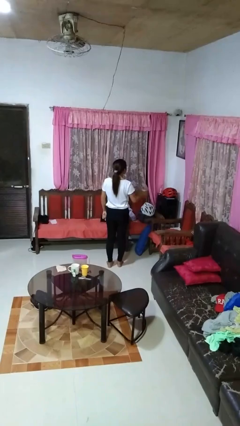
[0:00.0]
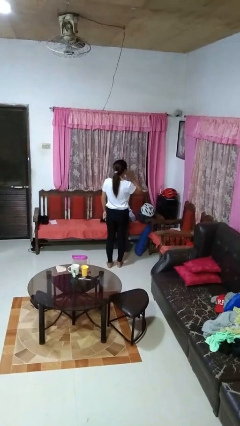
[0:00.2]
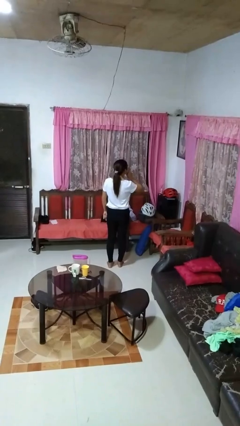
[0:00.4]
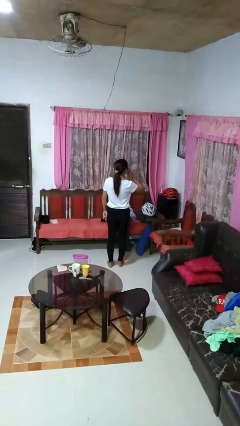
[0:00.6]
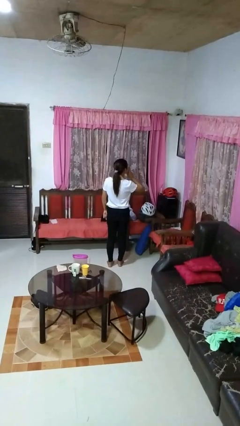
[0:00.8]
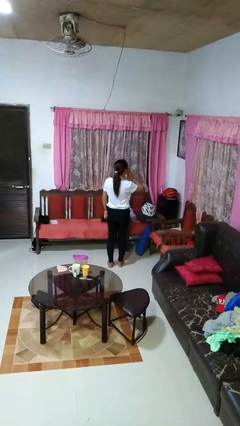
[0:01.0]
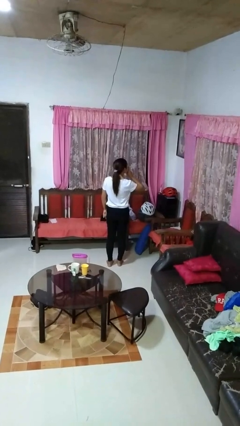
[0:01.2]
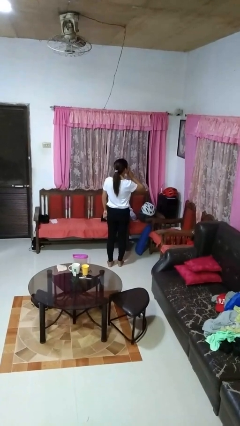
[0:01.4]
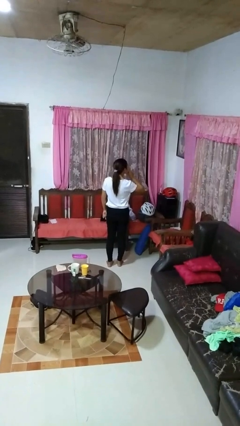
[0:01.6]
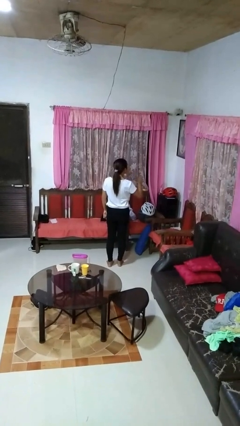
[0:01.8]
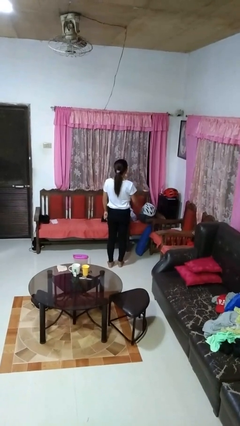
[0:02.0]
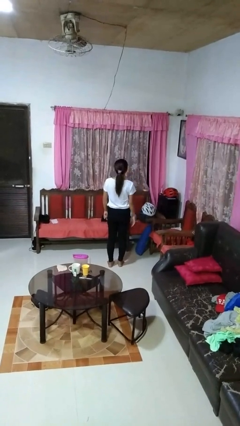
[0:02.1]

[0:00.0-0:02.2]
person gestures be quiet

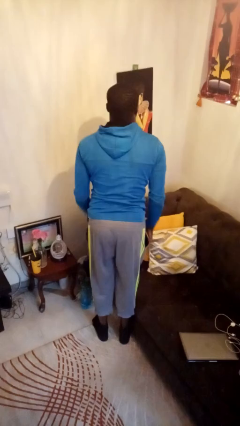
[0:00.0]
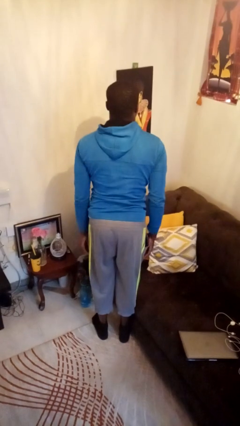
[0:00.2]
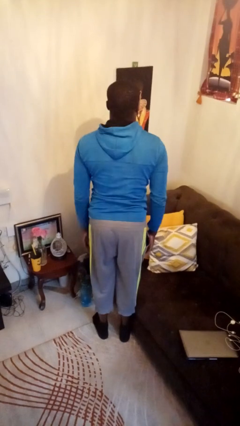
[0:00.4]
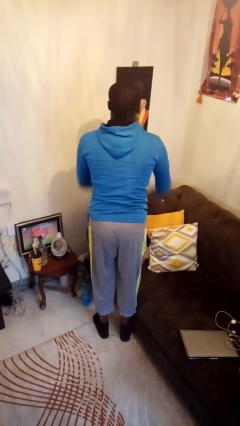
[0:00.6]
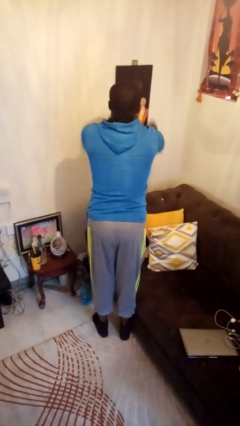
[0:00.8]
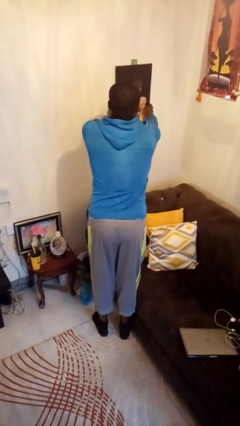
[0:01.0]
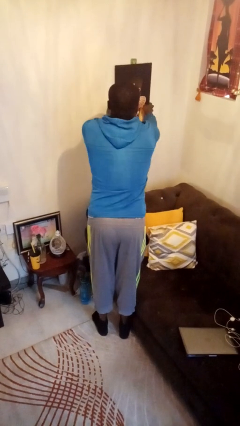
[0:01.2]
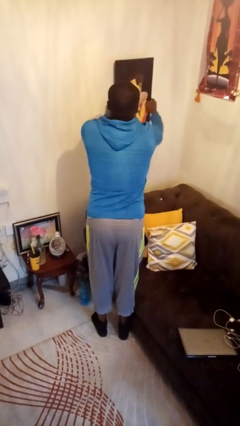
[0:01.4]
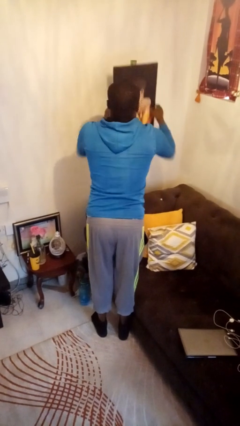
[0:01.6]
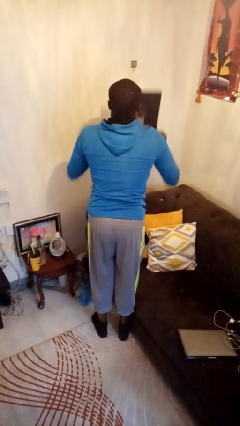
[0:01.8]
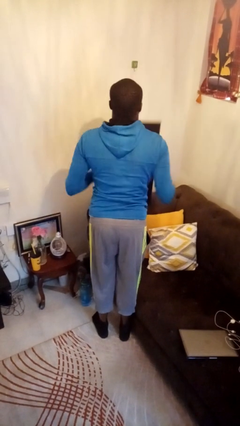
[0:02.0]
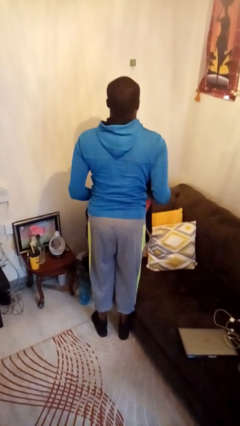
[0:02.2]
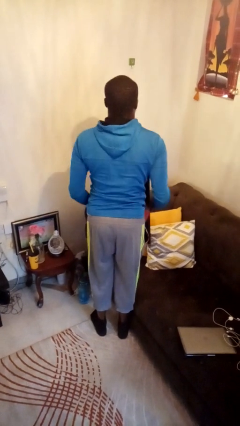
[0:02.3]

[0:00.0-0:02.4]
person takes down picture frame

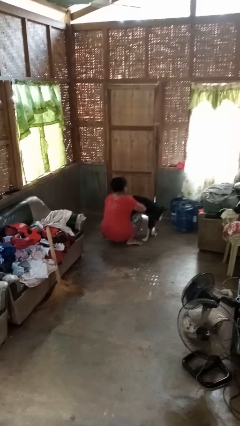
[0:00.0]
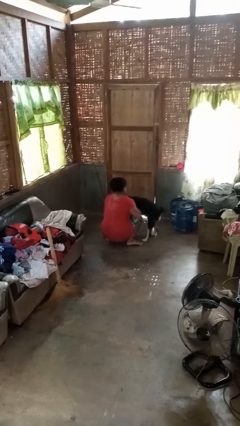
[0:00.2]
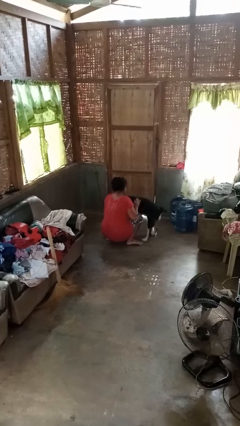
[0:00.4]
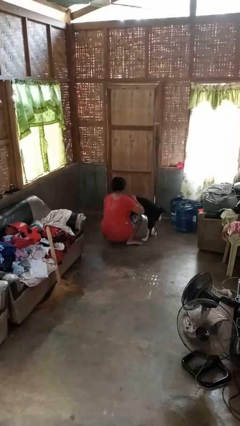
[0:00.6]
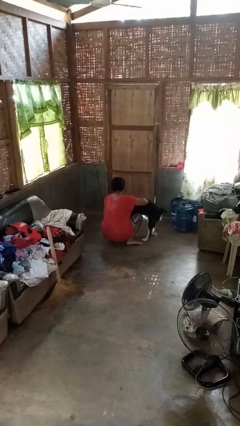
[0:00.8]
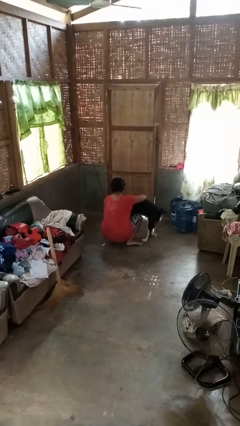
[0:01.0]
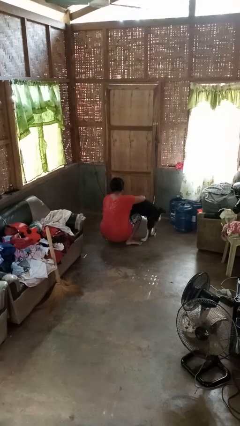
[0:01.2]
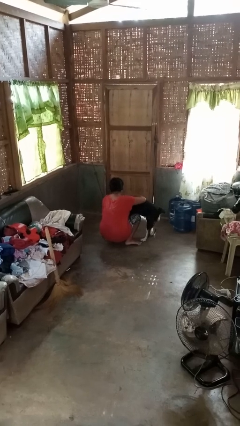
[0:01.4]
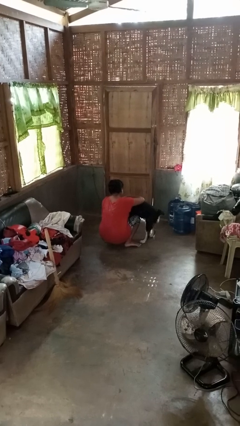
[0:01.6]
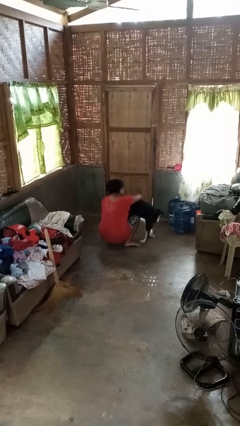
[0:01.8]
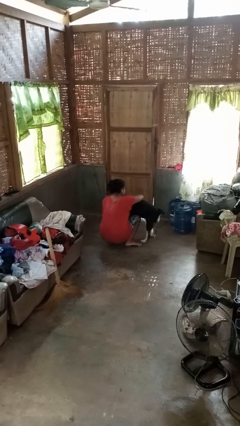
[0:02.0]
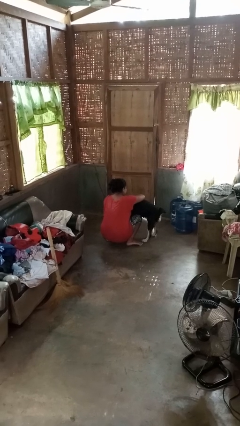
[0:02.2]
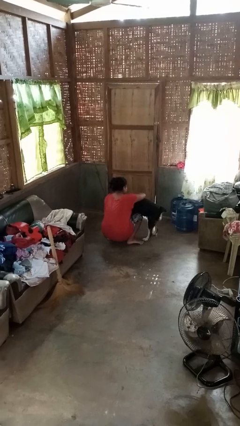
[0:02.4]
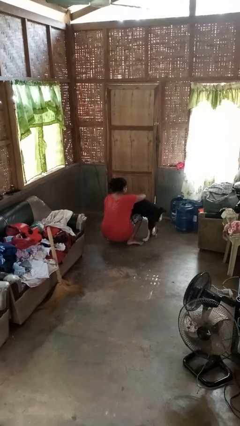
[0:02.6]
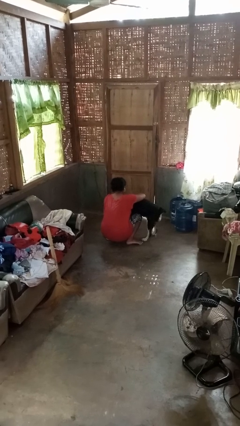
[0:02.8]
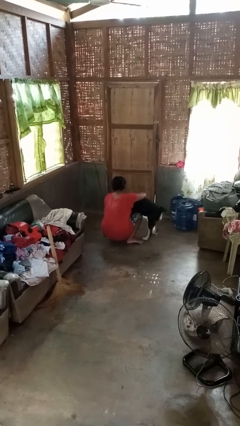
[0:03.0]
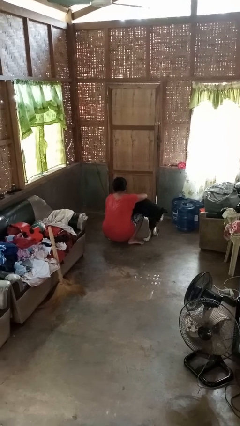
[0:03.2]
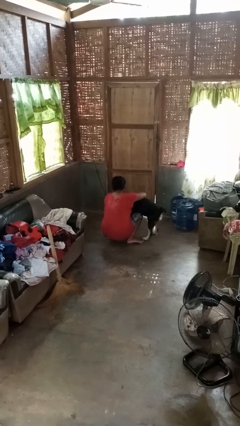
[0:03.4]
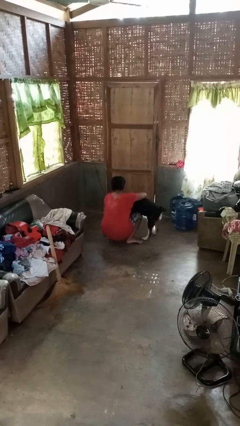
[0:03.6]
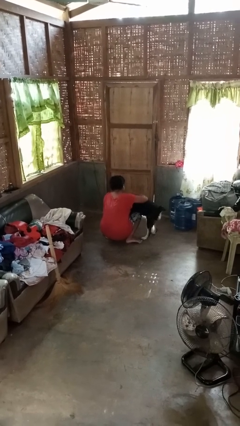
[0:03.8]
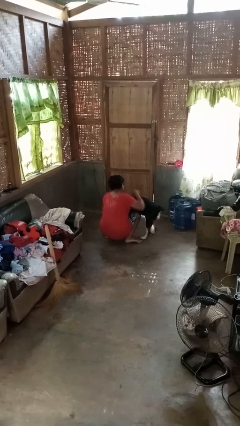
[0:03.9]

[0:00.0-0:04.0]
person hugs dog

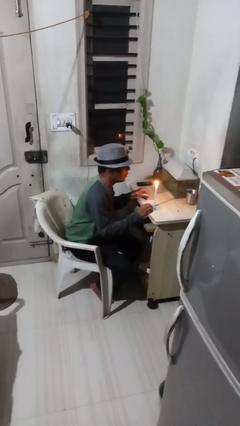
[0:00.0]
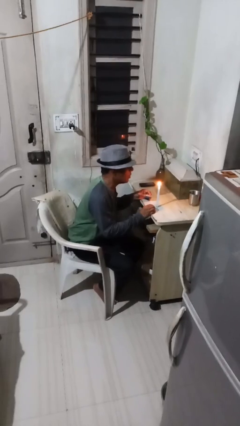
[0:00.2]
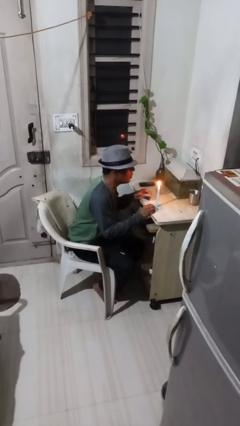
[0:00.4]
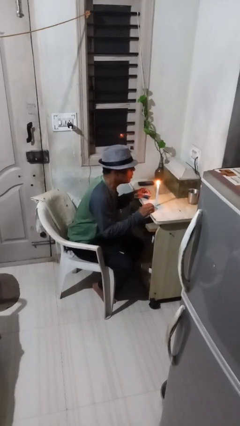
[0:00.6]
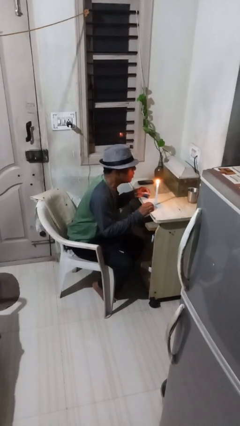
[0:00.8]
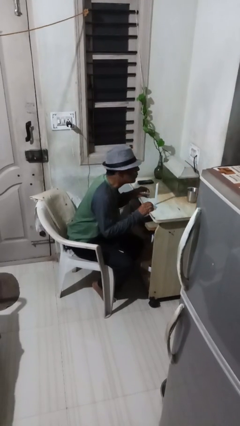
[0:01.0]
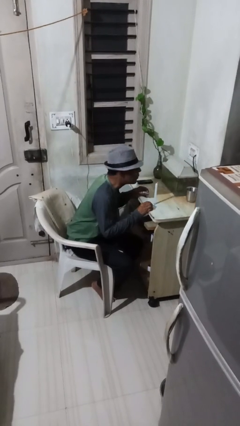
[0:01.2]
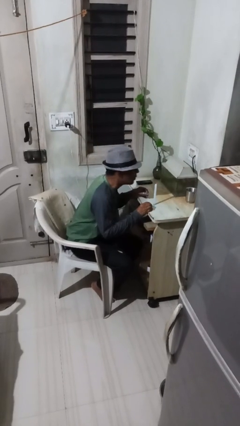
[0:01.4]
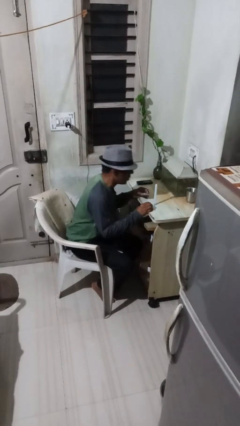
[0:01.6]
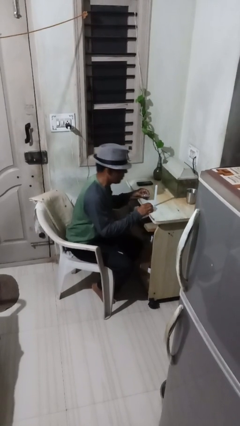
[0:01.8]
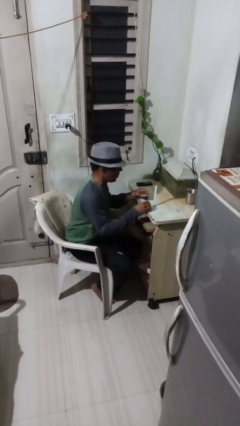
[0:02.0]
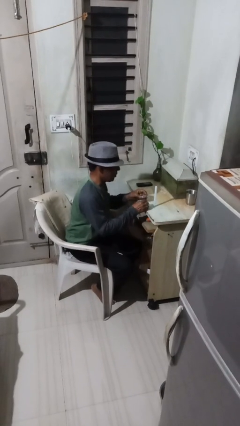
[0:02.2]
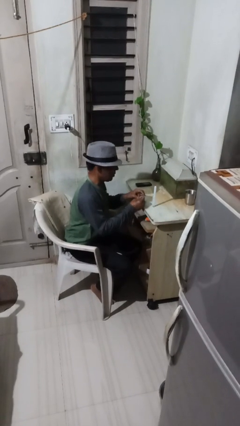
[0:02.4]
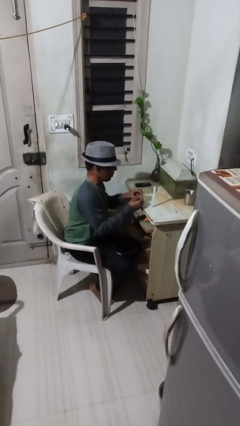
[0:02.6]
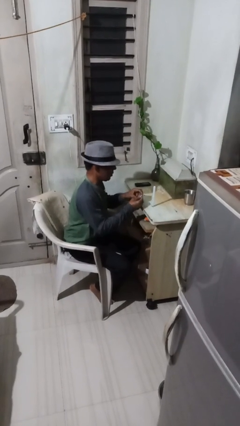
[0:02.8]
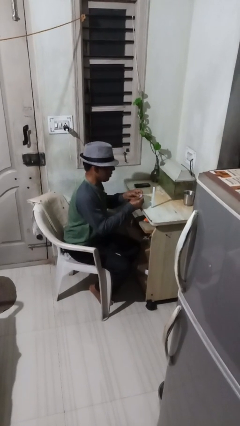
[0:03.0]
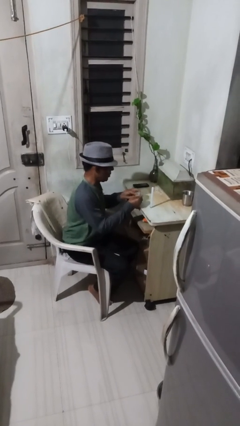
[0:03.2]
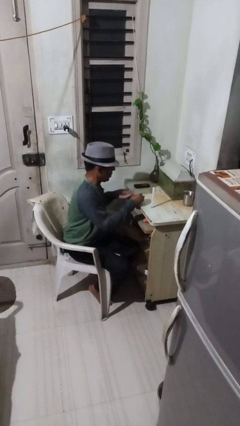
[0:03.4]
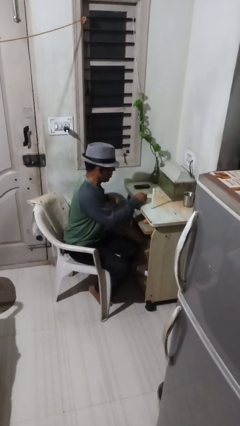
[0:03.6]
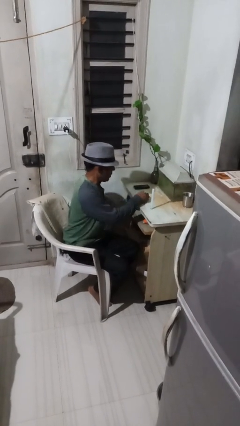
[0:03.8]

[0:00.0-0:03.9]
person extinguishes candle

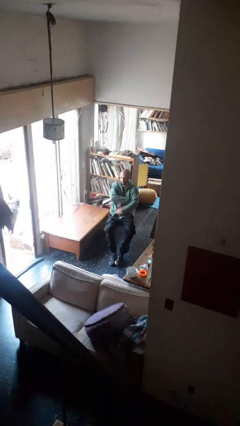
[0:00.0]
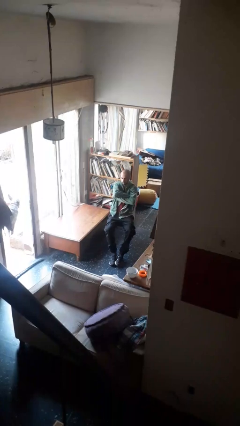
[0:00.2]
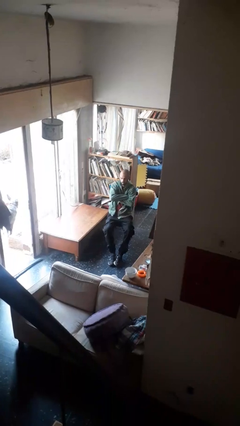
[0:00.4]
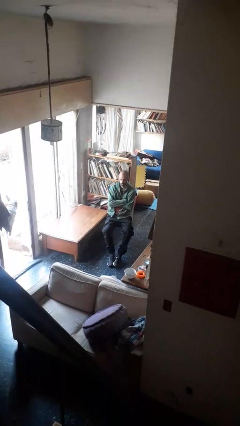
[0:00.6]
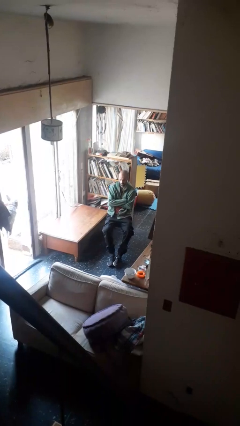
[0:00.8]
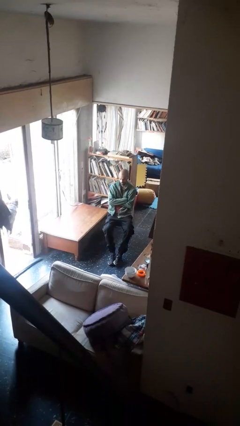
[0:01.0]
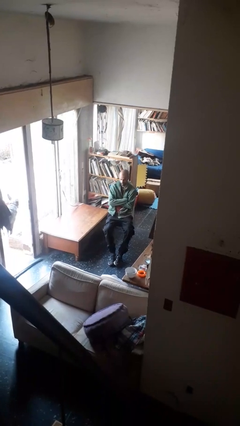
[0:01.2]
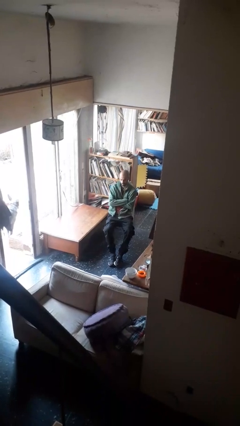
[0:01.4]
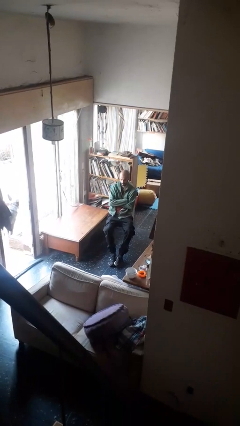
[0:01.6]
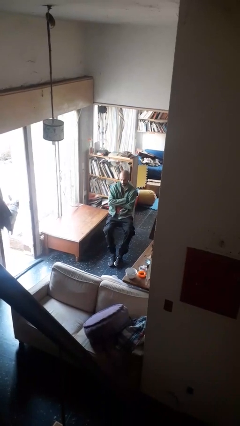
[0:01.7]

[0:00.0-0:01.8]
person crosses arms

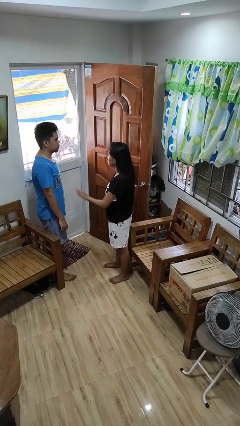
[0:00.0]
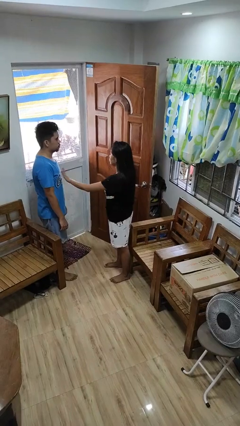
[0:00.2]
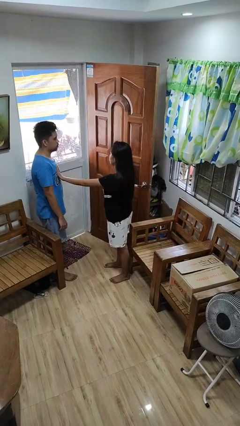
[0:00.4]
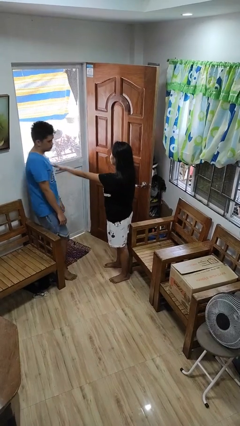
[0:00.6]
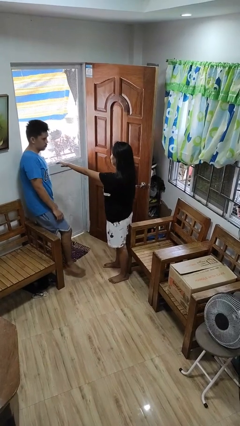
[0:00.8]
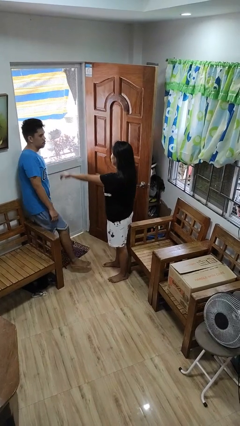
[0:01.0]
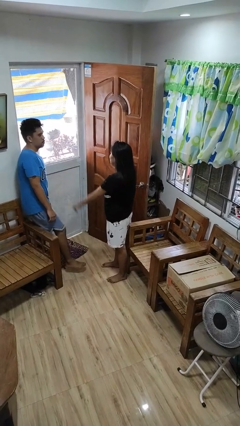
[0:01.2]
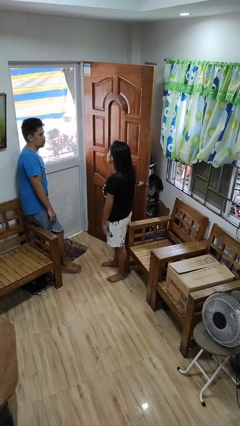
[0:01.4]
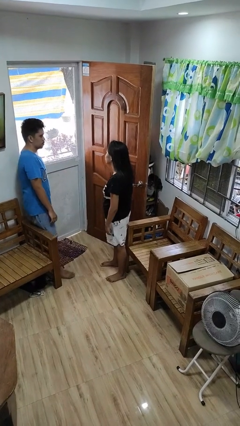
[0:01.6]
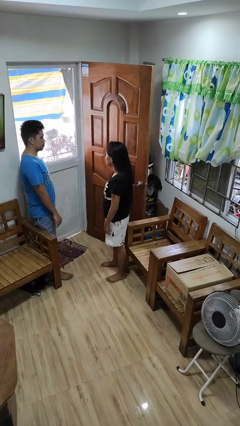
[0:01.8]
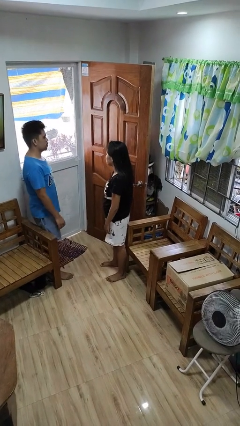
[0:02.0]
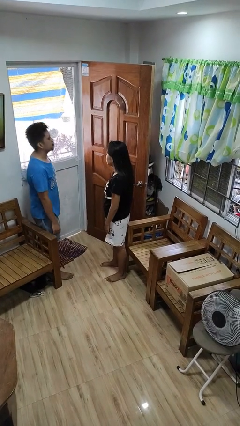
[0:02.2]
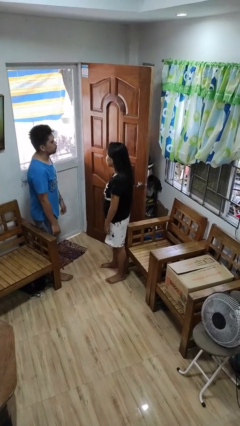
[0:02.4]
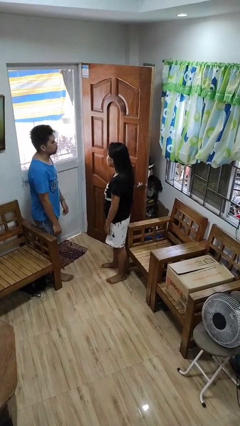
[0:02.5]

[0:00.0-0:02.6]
person shoves person

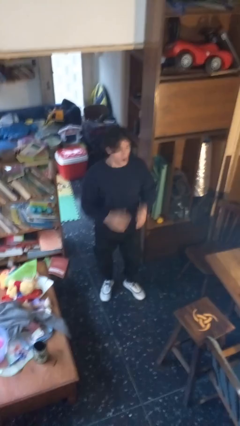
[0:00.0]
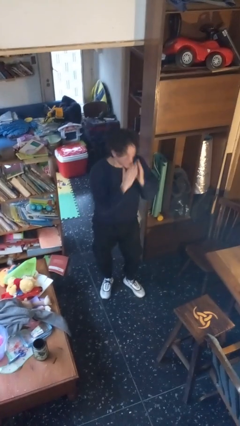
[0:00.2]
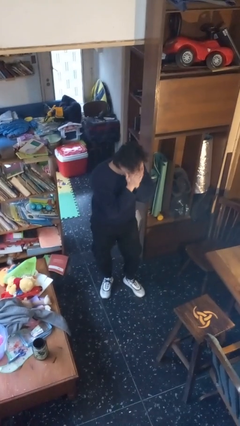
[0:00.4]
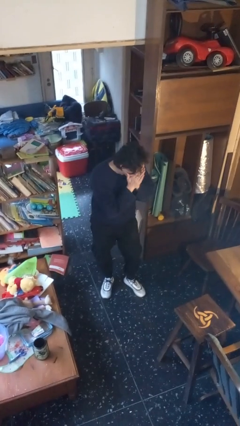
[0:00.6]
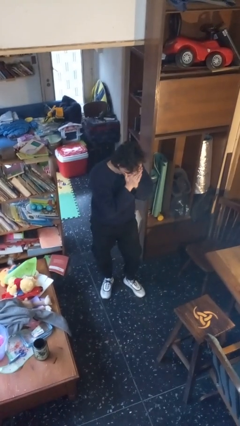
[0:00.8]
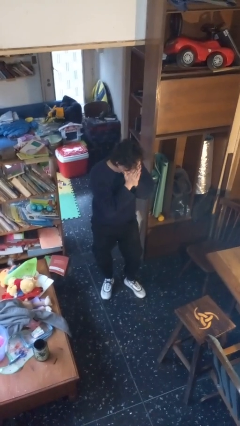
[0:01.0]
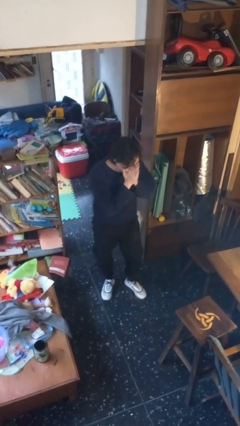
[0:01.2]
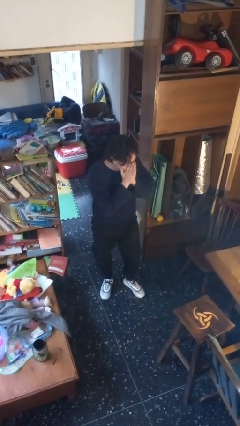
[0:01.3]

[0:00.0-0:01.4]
person sneezes into hand
